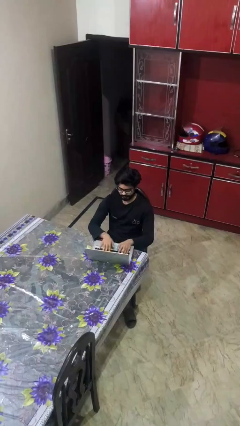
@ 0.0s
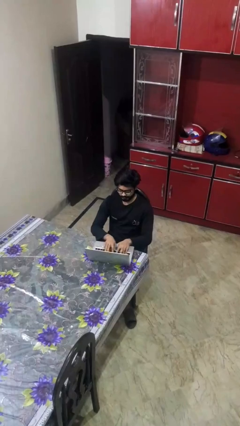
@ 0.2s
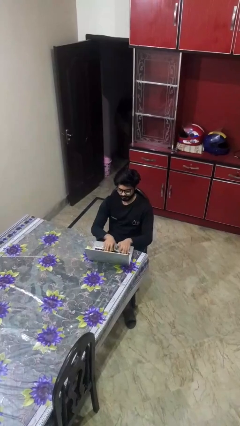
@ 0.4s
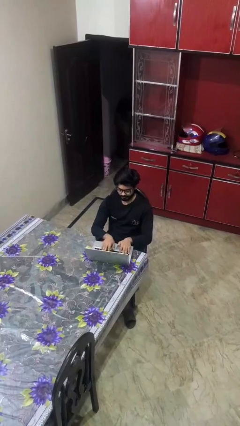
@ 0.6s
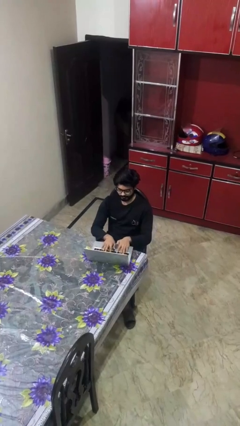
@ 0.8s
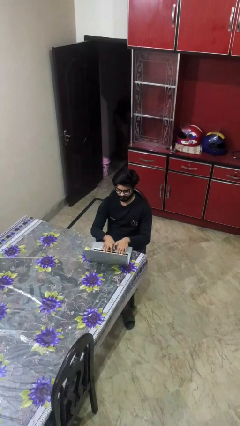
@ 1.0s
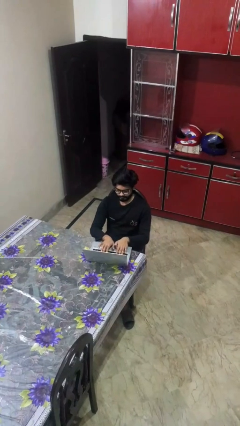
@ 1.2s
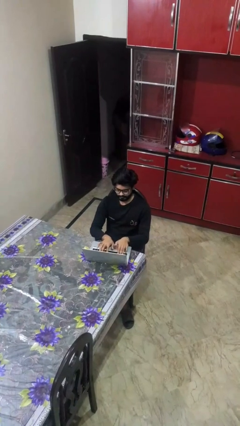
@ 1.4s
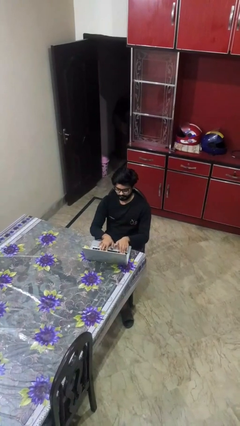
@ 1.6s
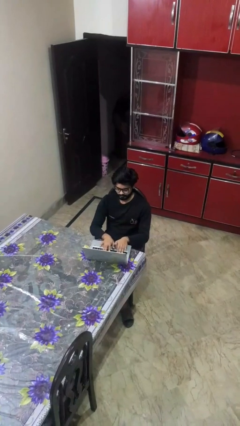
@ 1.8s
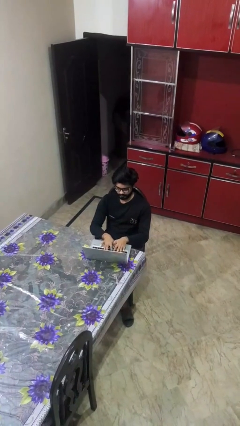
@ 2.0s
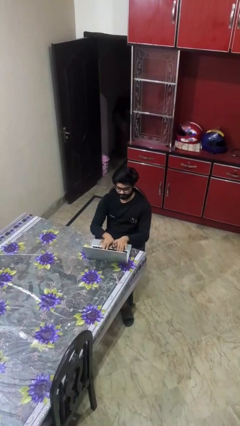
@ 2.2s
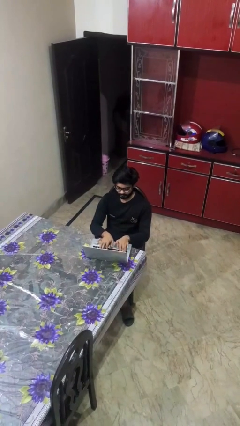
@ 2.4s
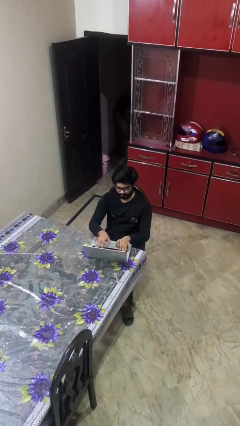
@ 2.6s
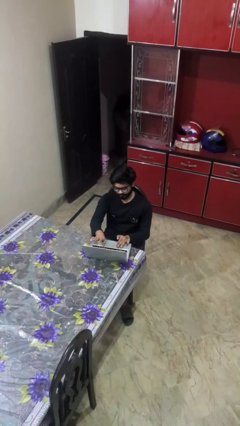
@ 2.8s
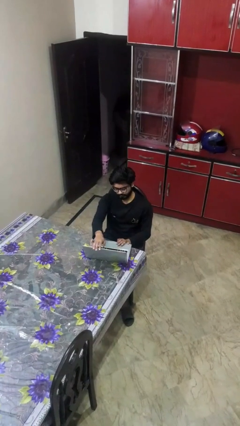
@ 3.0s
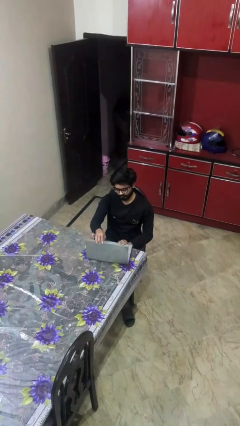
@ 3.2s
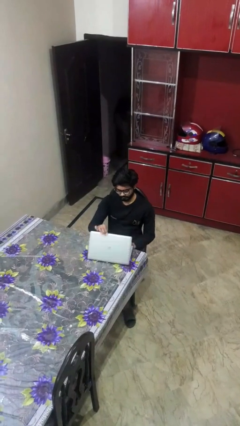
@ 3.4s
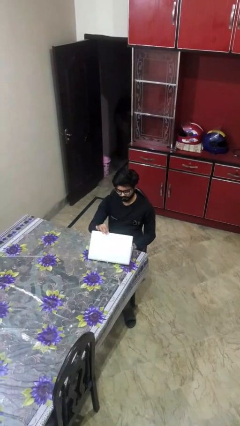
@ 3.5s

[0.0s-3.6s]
person interacts with laptop

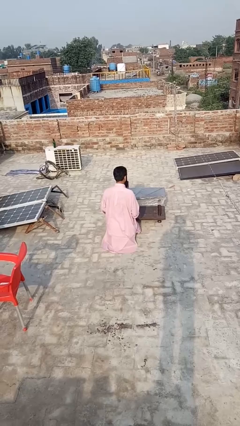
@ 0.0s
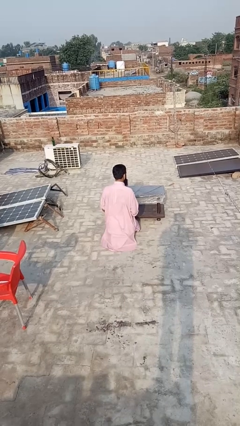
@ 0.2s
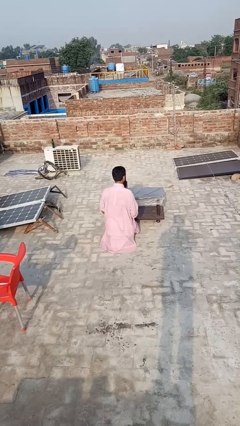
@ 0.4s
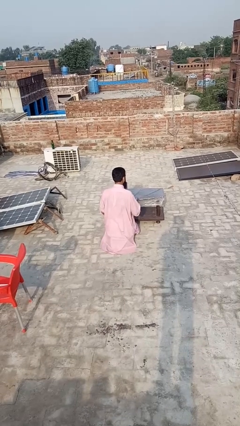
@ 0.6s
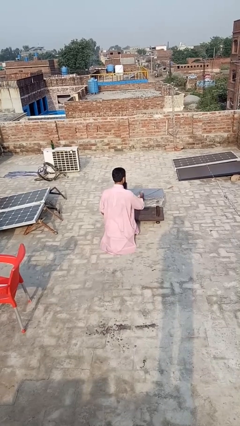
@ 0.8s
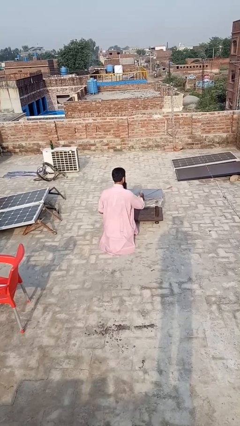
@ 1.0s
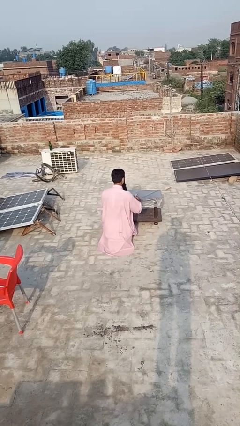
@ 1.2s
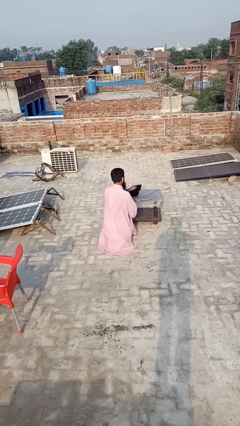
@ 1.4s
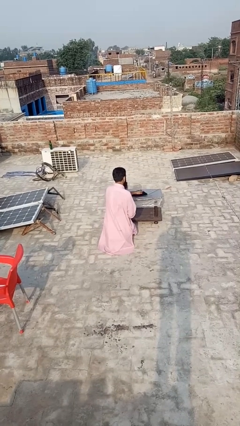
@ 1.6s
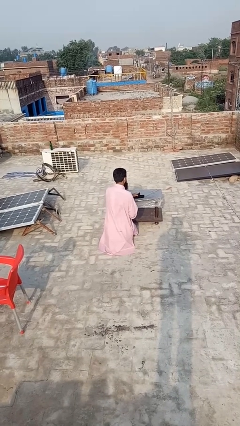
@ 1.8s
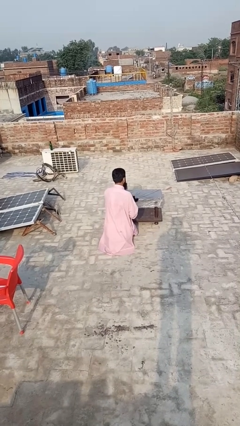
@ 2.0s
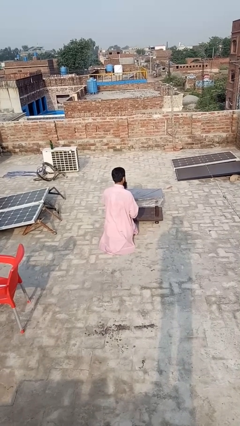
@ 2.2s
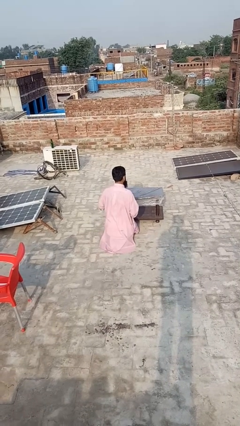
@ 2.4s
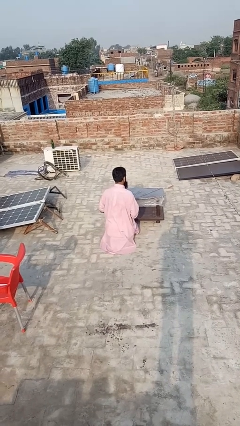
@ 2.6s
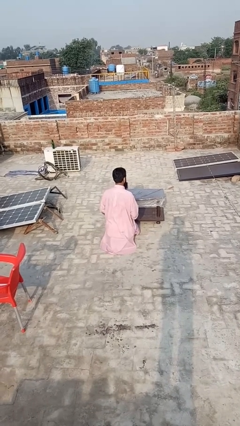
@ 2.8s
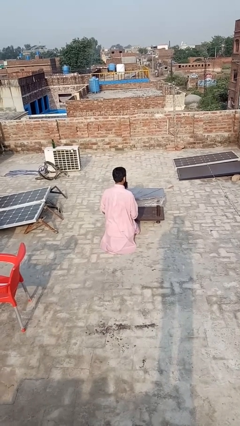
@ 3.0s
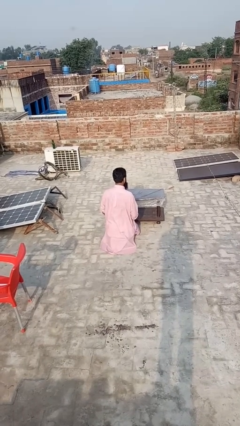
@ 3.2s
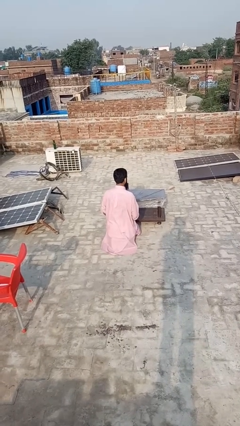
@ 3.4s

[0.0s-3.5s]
person sprays from bottle

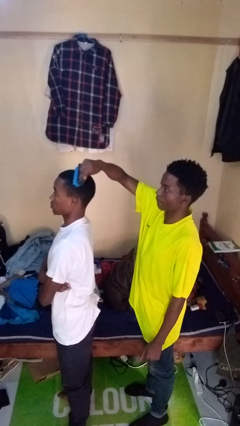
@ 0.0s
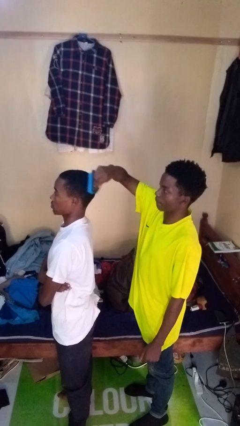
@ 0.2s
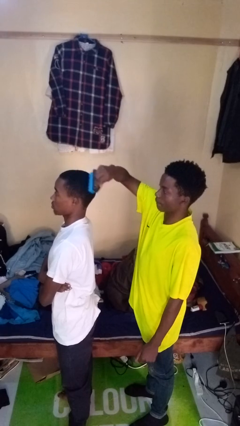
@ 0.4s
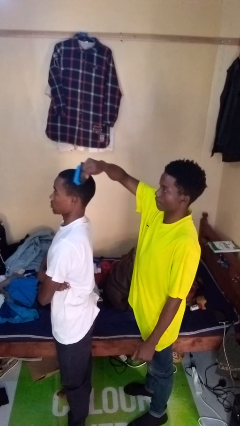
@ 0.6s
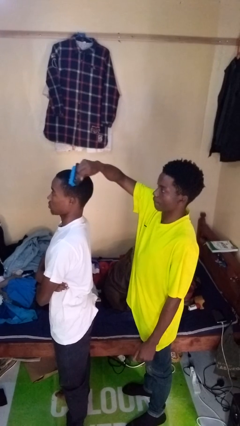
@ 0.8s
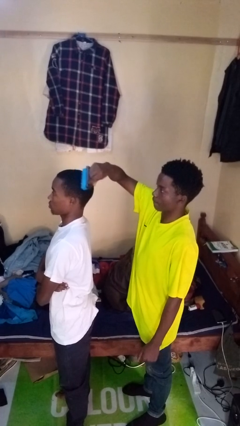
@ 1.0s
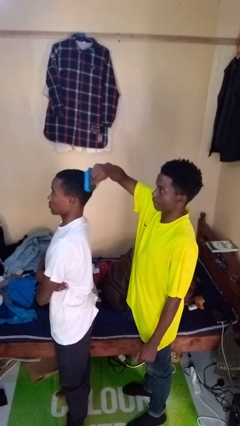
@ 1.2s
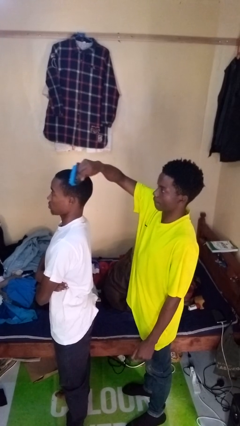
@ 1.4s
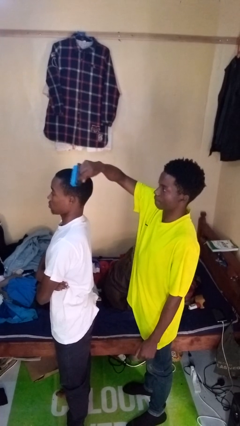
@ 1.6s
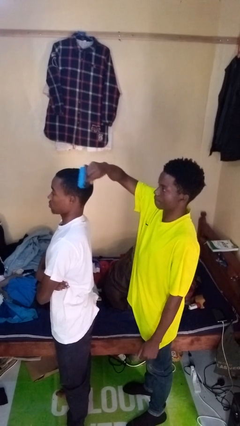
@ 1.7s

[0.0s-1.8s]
person brushes hair of person

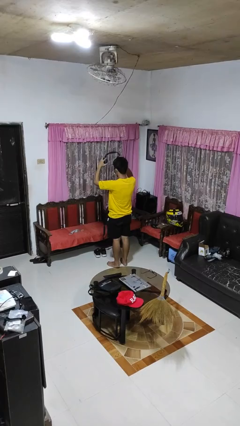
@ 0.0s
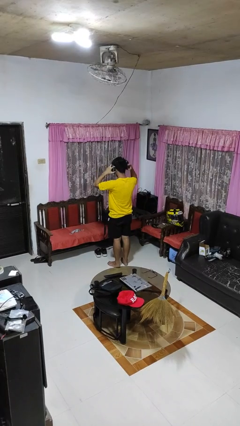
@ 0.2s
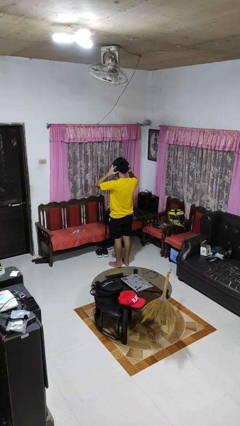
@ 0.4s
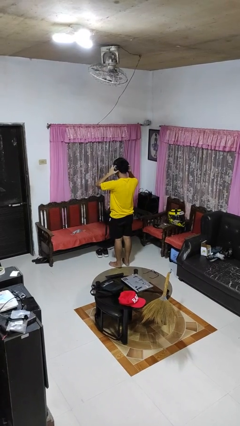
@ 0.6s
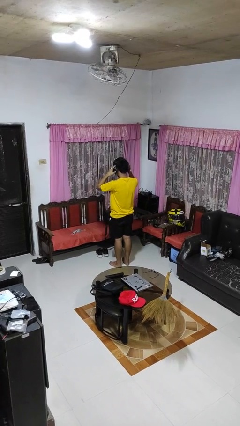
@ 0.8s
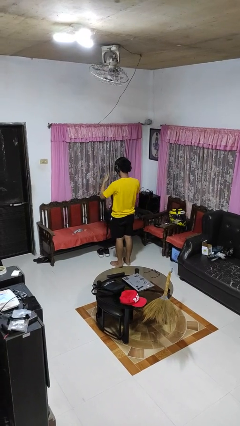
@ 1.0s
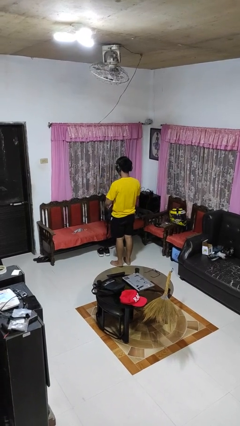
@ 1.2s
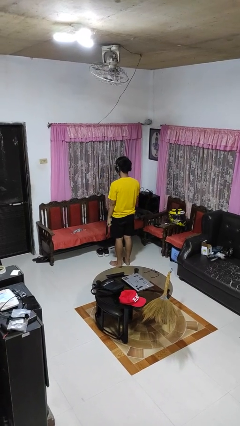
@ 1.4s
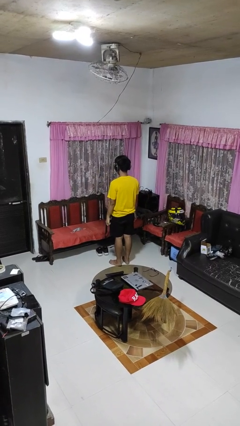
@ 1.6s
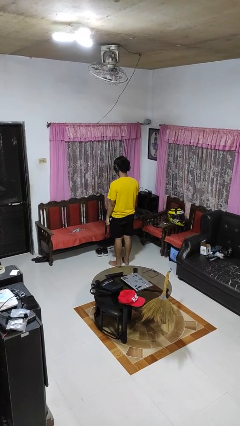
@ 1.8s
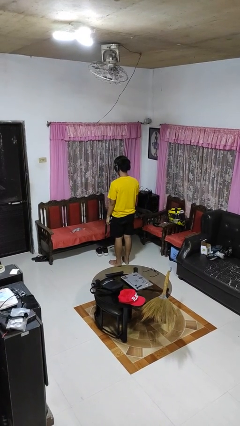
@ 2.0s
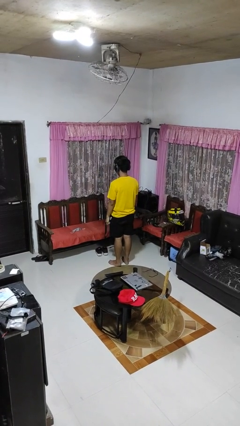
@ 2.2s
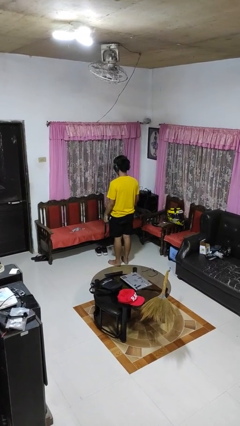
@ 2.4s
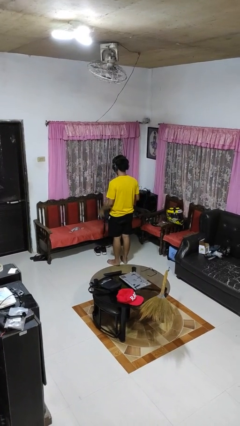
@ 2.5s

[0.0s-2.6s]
person puts on headphones

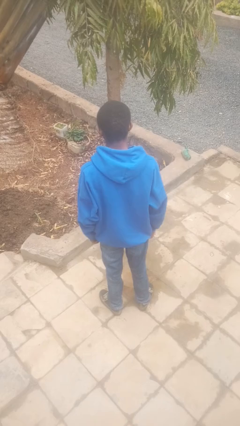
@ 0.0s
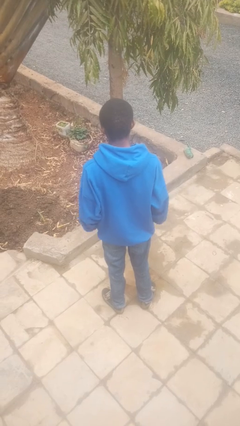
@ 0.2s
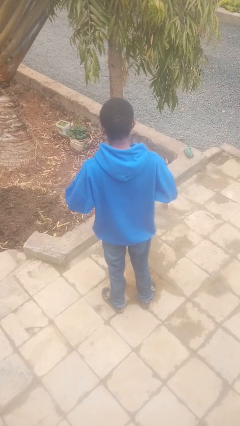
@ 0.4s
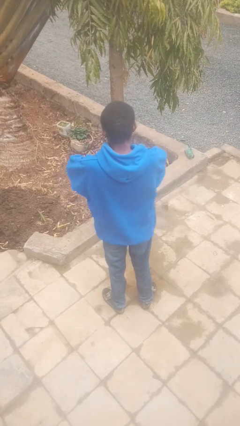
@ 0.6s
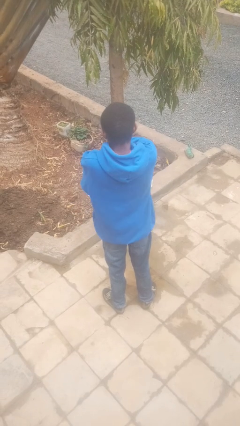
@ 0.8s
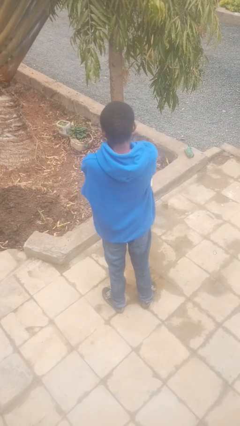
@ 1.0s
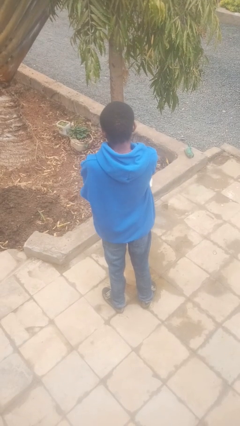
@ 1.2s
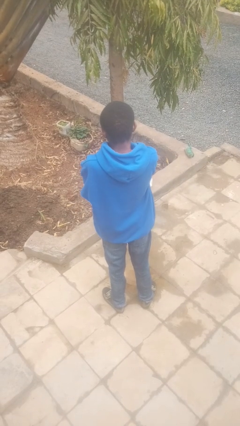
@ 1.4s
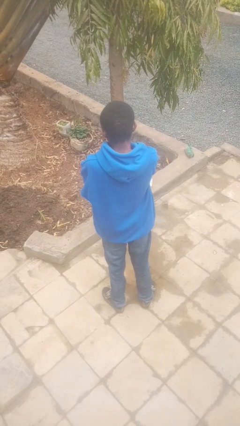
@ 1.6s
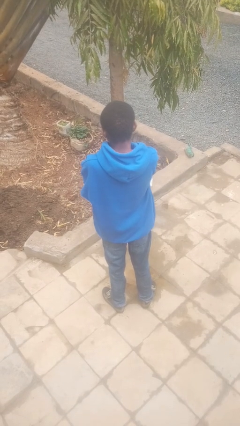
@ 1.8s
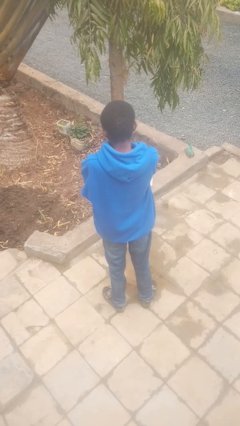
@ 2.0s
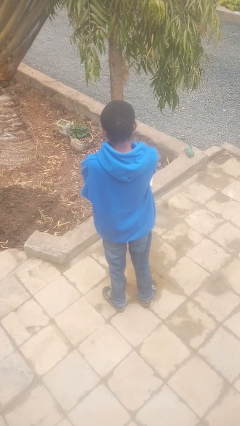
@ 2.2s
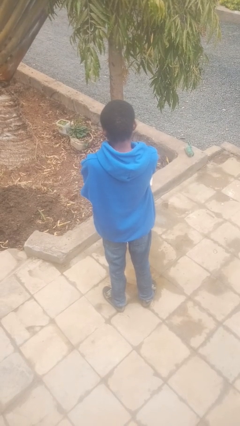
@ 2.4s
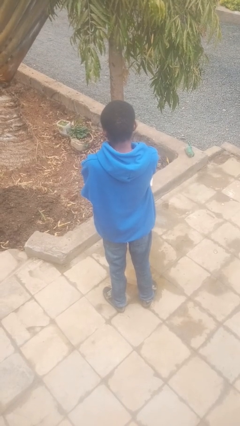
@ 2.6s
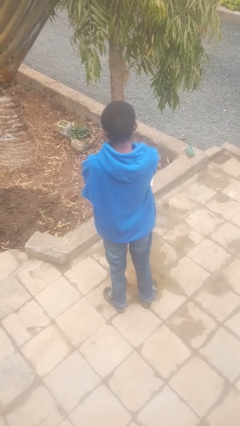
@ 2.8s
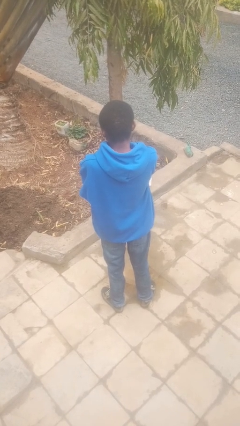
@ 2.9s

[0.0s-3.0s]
person crosses arms

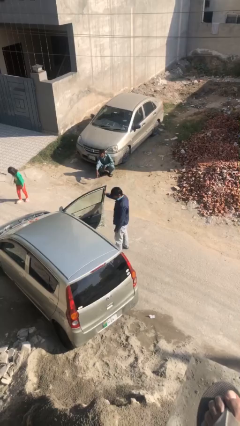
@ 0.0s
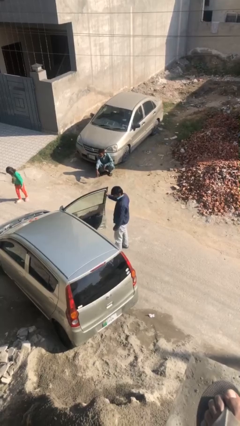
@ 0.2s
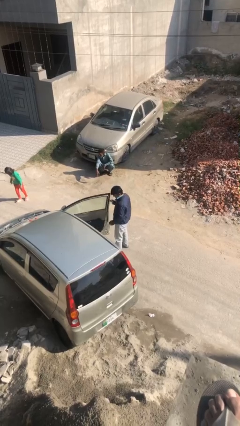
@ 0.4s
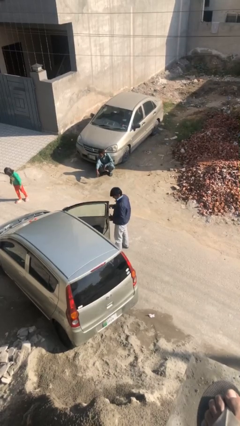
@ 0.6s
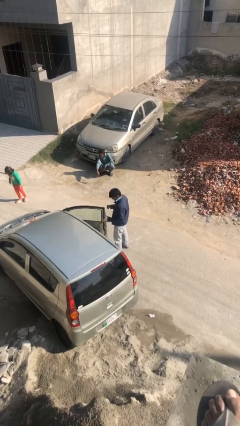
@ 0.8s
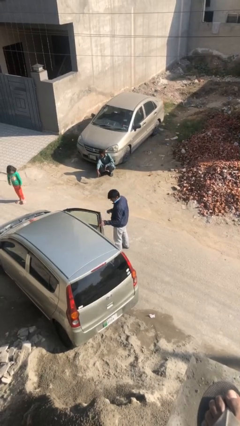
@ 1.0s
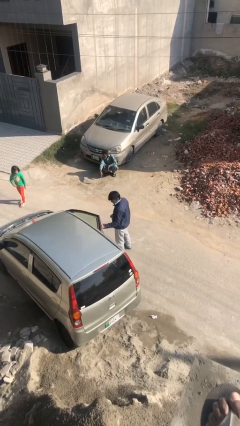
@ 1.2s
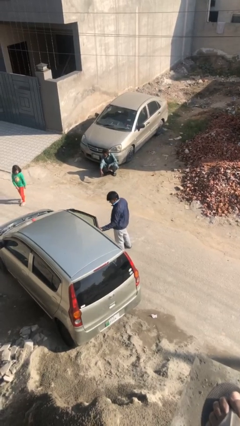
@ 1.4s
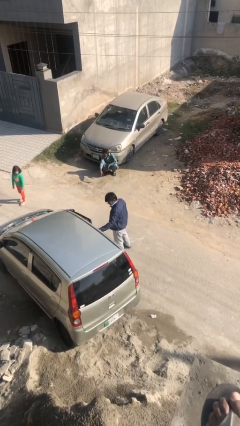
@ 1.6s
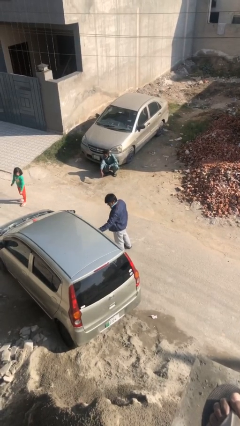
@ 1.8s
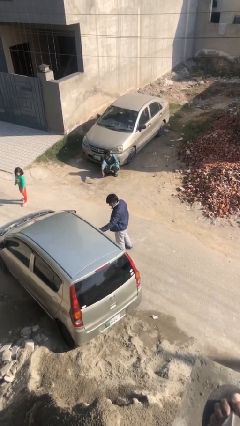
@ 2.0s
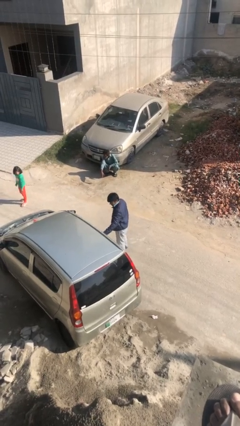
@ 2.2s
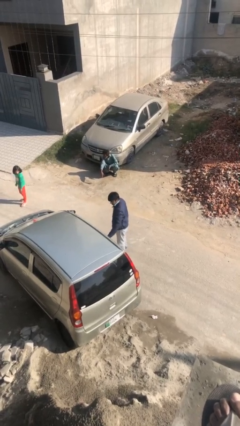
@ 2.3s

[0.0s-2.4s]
person closes car door

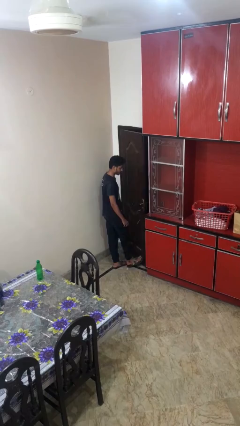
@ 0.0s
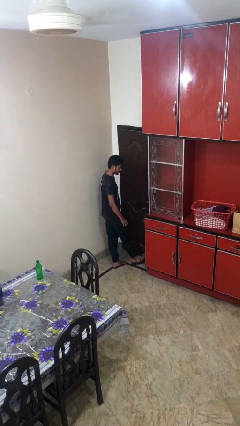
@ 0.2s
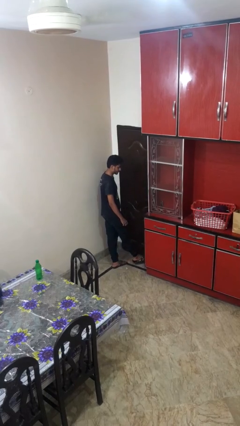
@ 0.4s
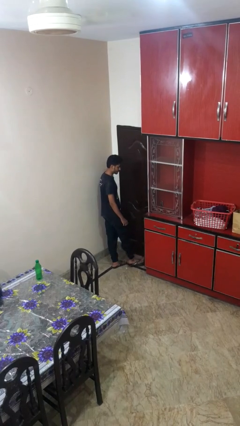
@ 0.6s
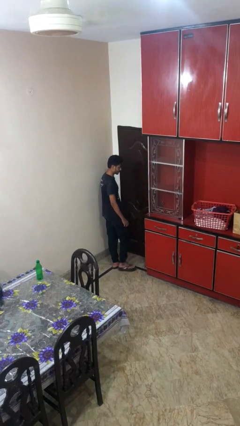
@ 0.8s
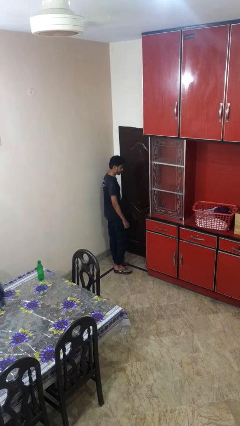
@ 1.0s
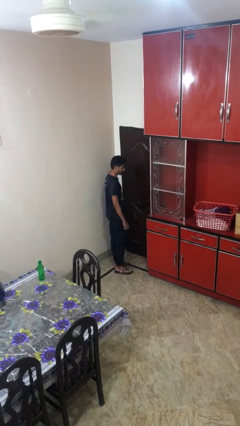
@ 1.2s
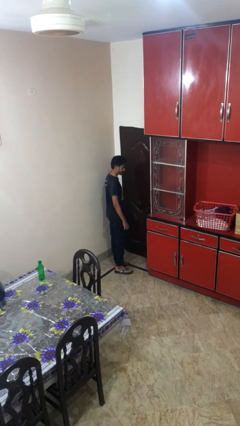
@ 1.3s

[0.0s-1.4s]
person closes door with foot
